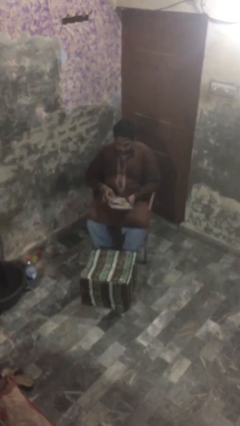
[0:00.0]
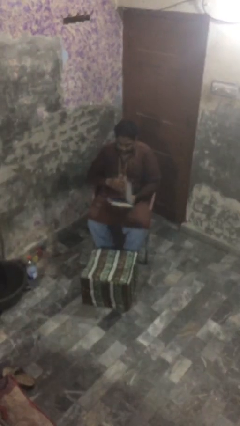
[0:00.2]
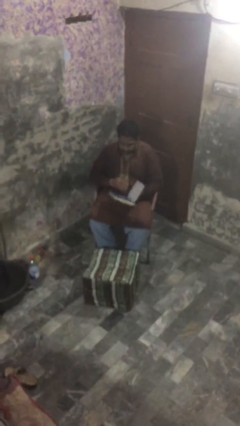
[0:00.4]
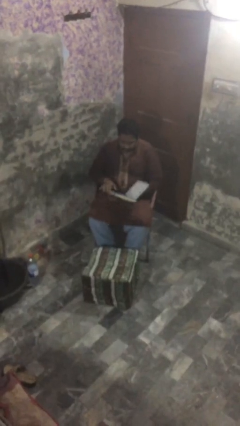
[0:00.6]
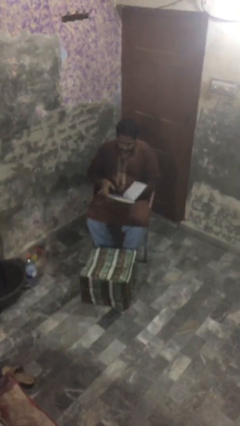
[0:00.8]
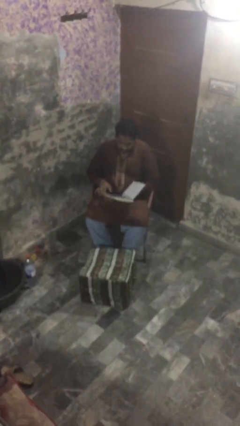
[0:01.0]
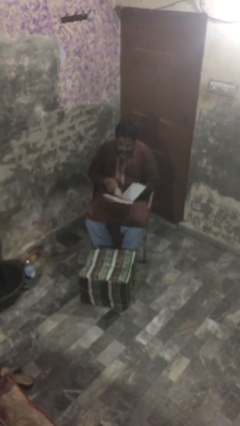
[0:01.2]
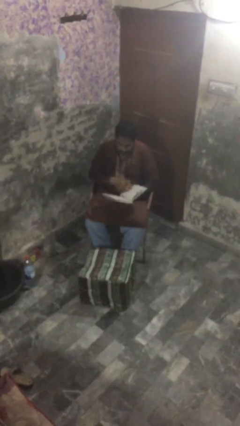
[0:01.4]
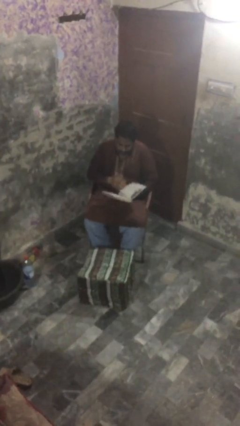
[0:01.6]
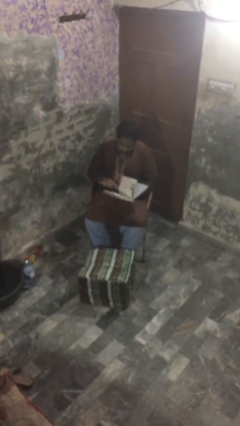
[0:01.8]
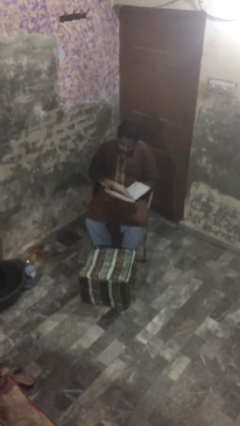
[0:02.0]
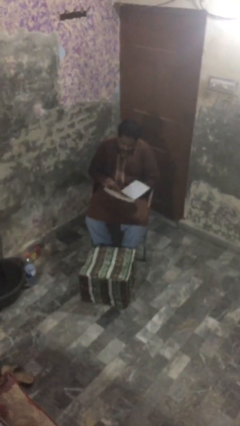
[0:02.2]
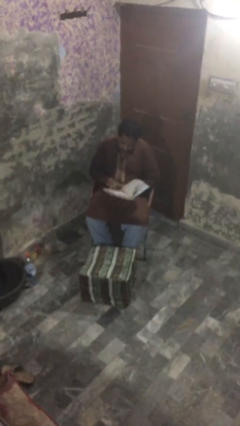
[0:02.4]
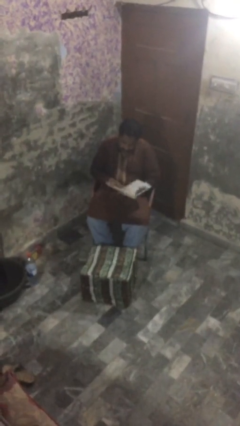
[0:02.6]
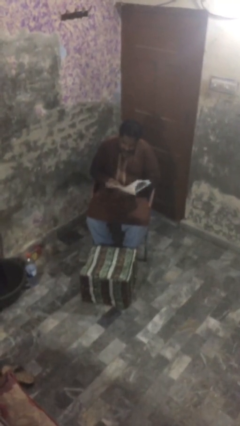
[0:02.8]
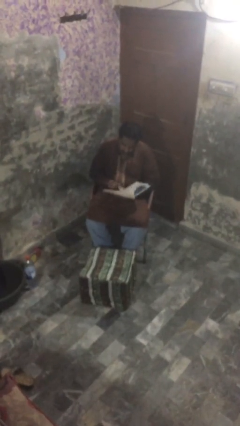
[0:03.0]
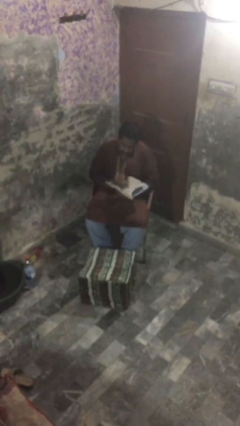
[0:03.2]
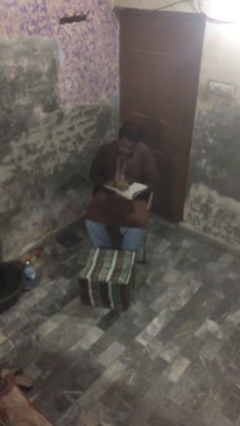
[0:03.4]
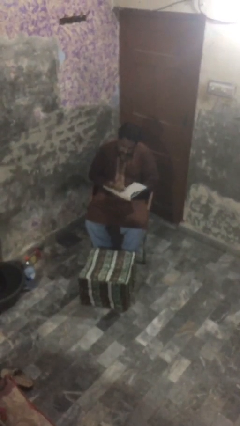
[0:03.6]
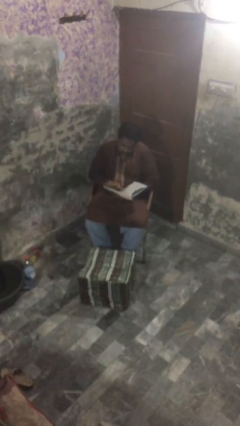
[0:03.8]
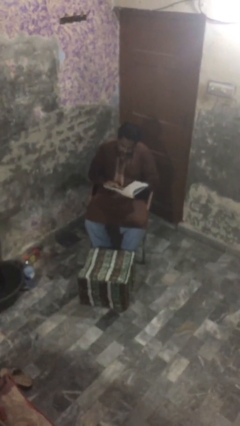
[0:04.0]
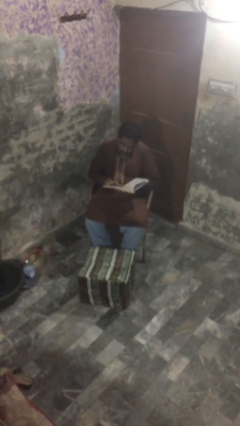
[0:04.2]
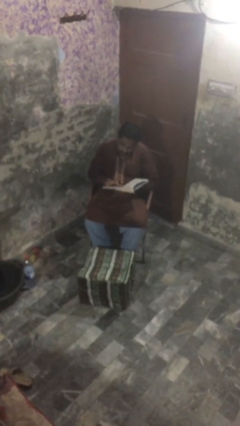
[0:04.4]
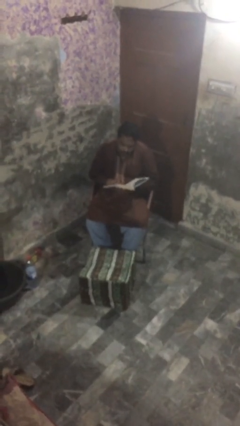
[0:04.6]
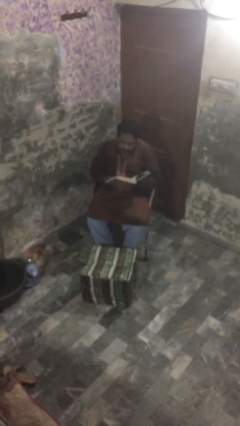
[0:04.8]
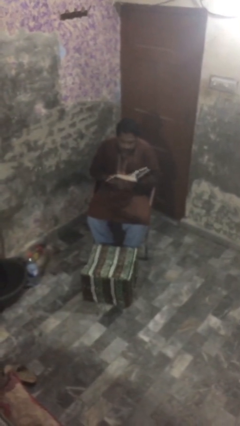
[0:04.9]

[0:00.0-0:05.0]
person reads document

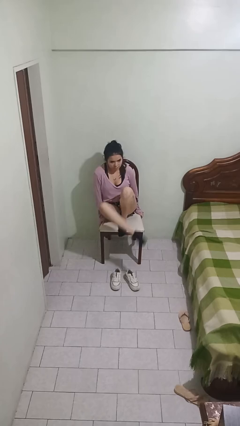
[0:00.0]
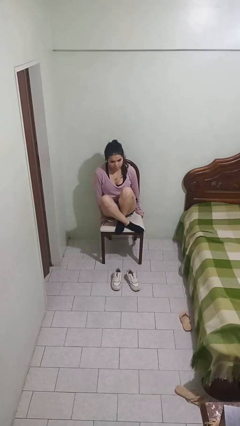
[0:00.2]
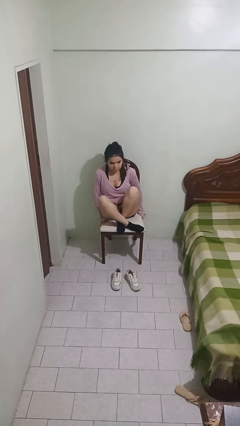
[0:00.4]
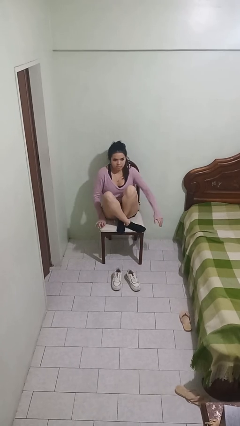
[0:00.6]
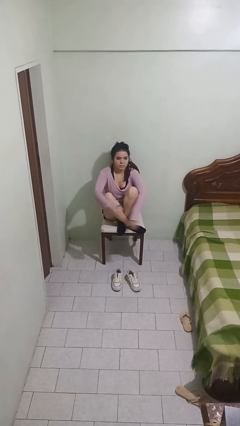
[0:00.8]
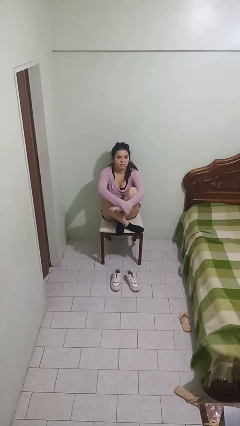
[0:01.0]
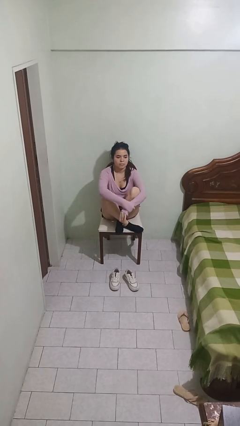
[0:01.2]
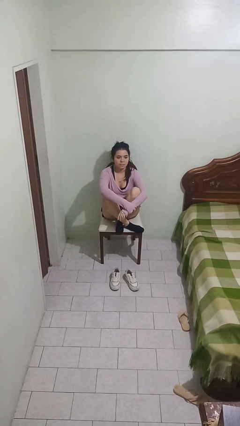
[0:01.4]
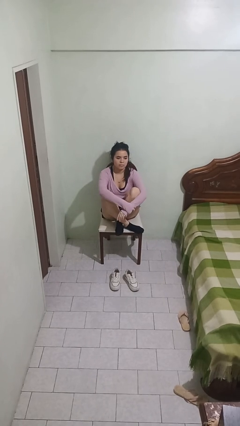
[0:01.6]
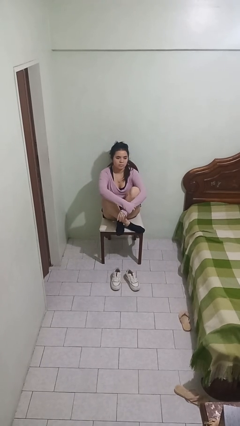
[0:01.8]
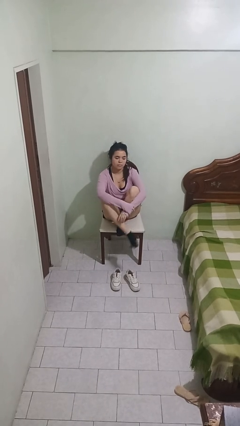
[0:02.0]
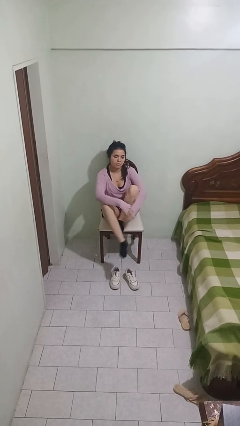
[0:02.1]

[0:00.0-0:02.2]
person puts feet up

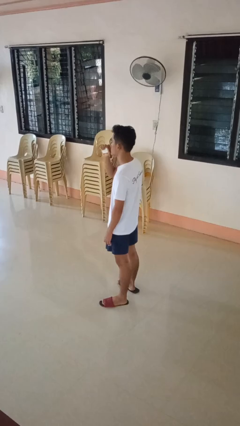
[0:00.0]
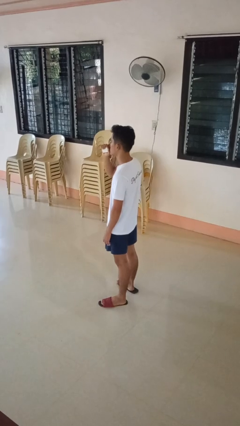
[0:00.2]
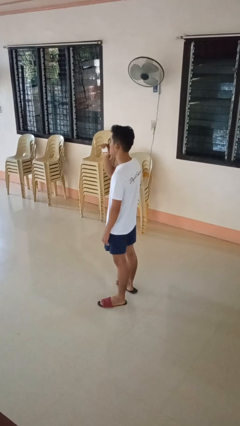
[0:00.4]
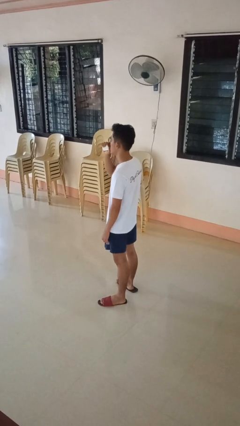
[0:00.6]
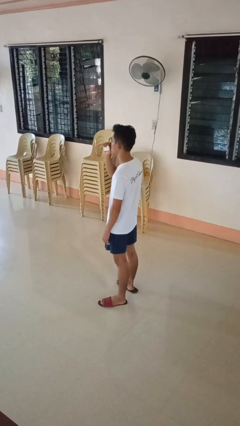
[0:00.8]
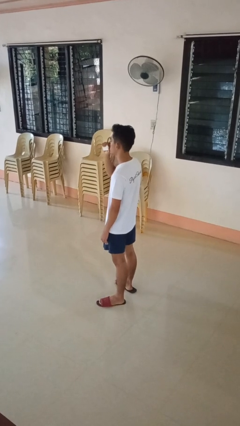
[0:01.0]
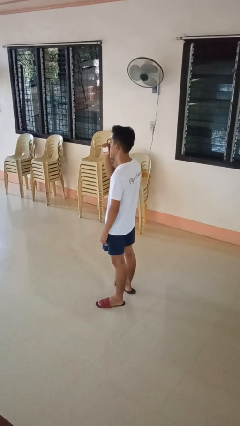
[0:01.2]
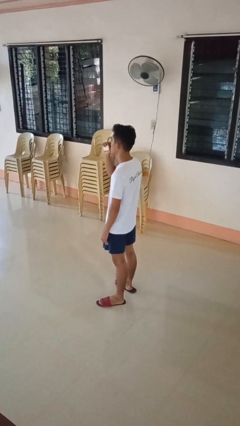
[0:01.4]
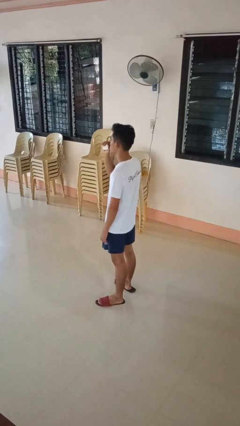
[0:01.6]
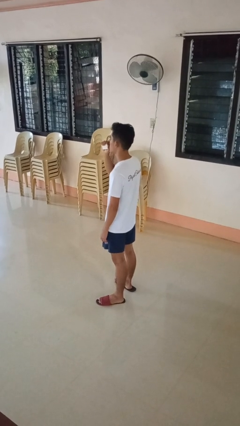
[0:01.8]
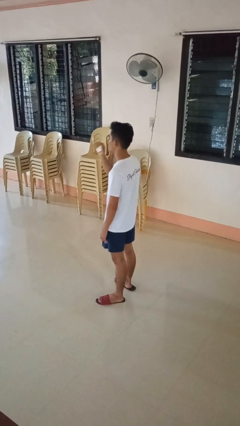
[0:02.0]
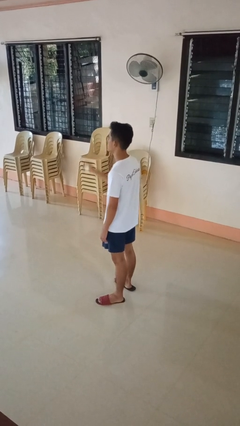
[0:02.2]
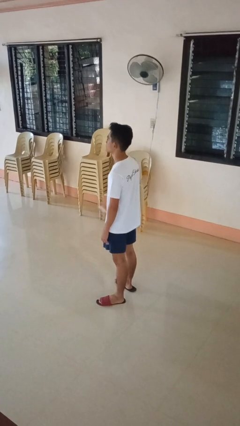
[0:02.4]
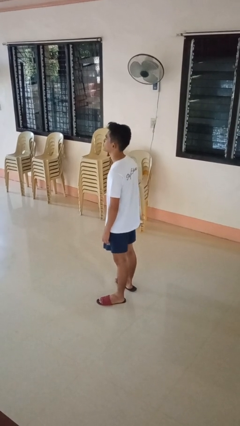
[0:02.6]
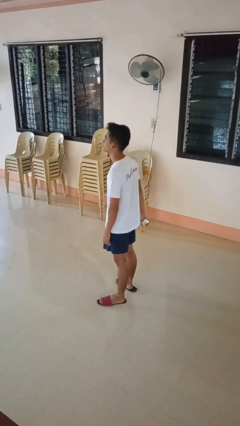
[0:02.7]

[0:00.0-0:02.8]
person vapes

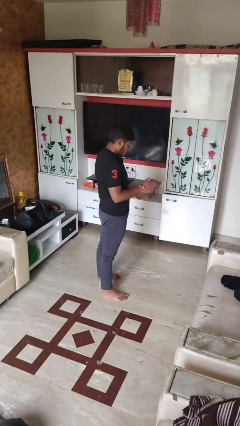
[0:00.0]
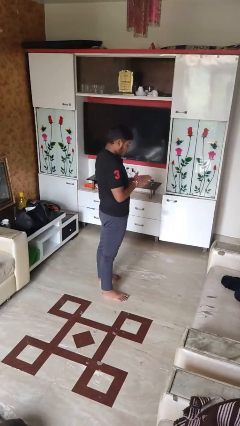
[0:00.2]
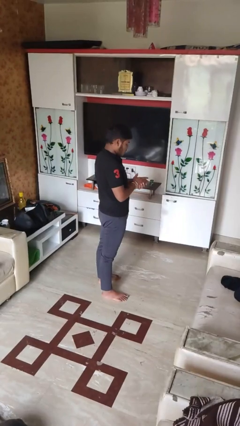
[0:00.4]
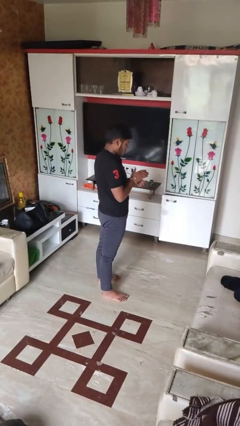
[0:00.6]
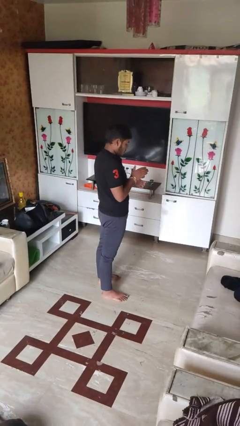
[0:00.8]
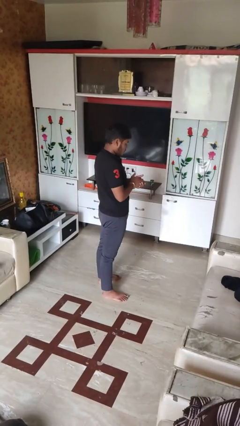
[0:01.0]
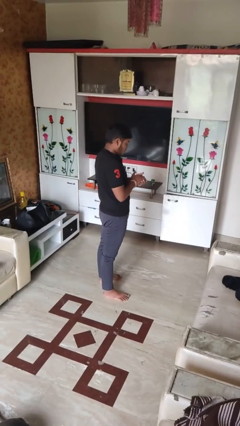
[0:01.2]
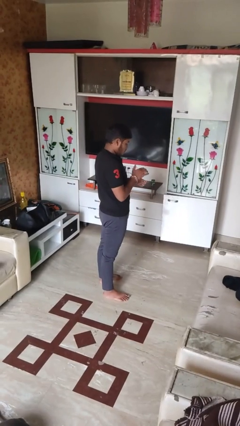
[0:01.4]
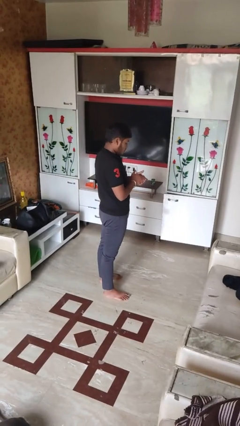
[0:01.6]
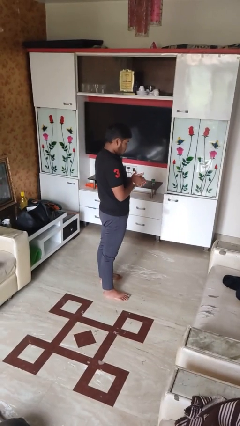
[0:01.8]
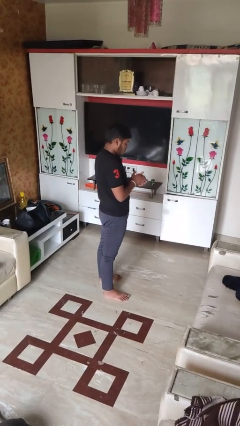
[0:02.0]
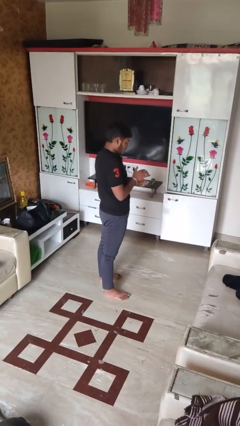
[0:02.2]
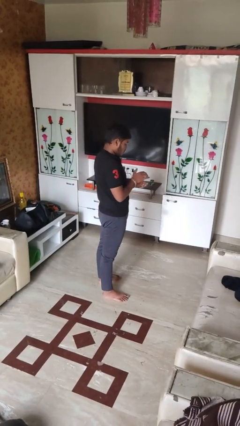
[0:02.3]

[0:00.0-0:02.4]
person claps hands

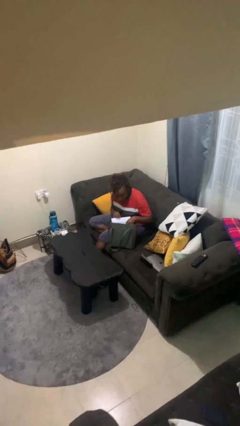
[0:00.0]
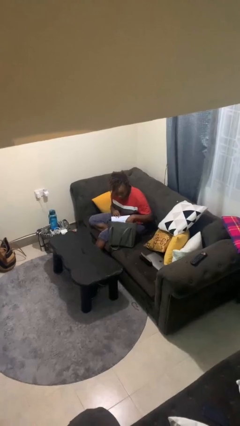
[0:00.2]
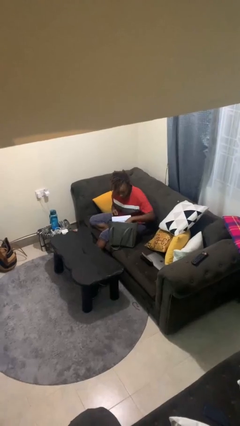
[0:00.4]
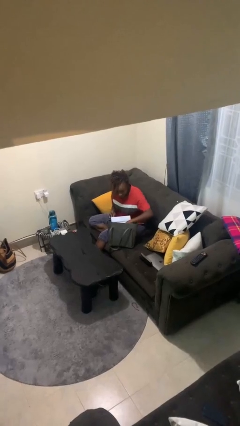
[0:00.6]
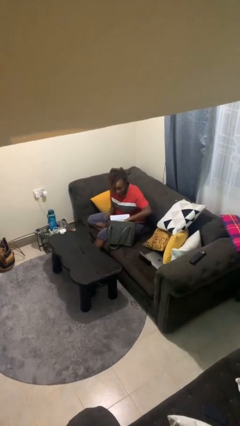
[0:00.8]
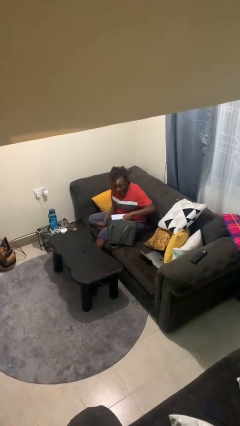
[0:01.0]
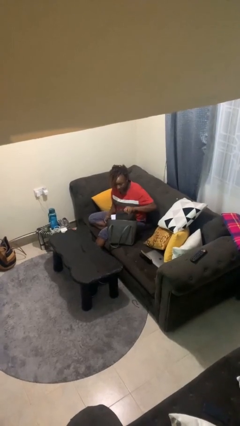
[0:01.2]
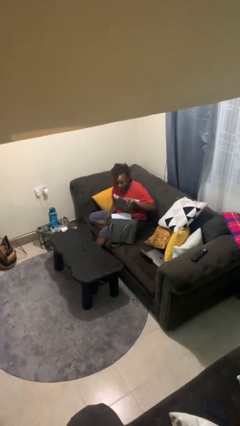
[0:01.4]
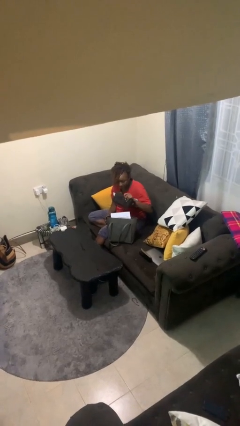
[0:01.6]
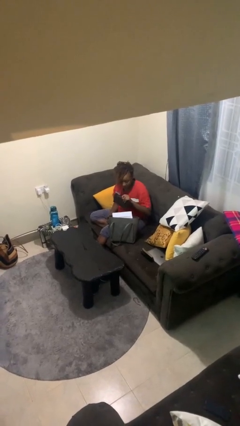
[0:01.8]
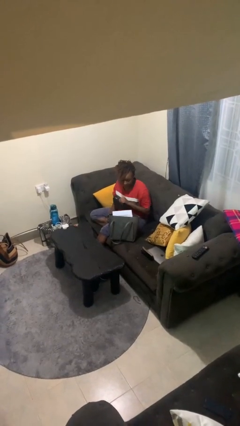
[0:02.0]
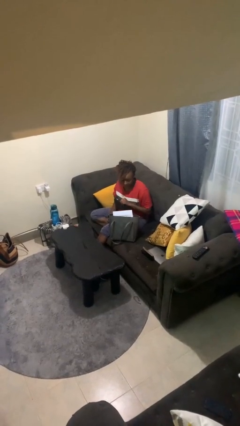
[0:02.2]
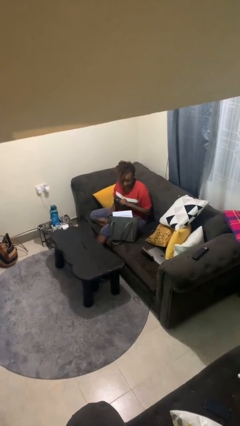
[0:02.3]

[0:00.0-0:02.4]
person takes object from purse

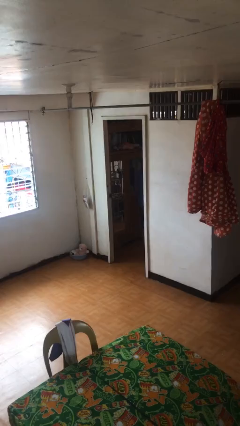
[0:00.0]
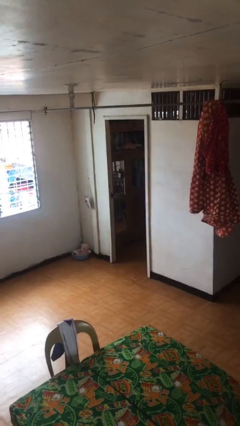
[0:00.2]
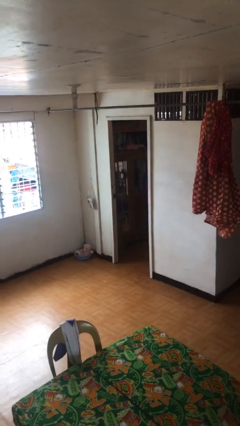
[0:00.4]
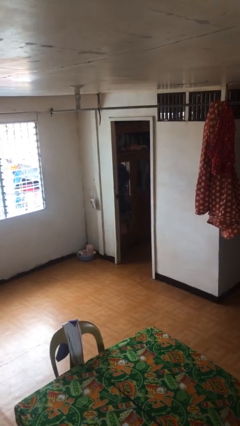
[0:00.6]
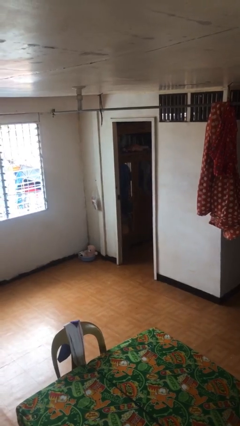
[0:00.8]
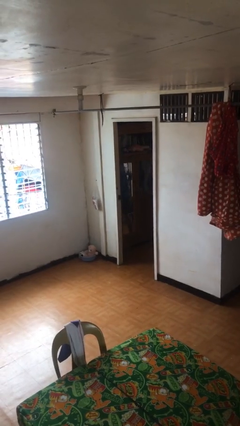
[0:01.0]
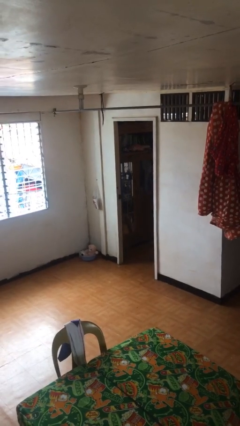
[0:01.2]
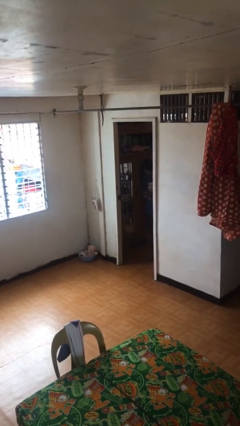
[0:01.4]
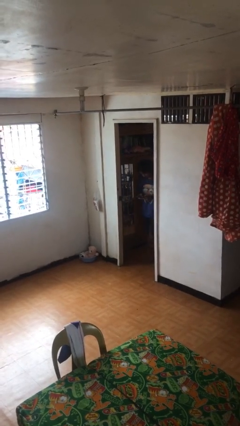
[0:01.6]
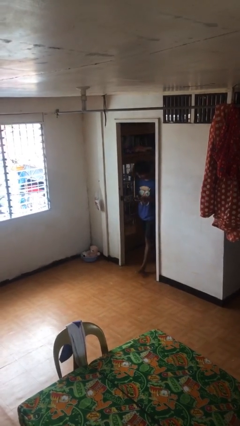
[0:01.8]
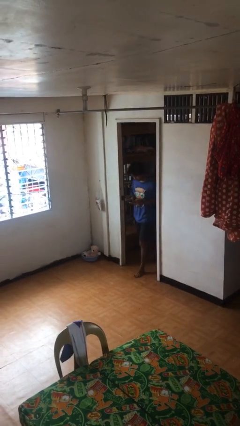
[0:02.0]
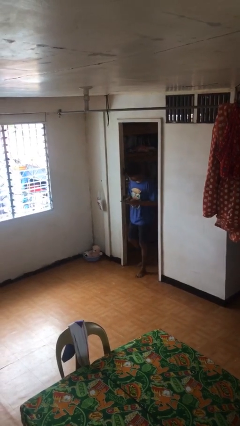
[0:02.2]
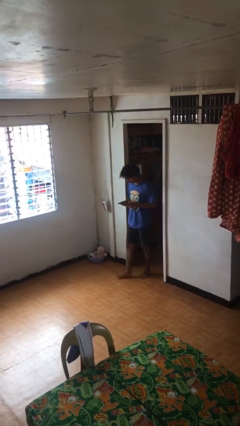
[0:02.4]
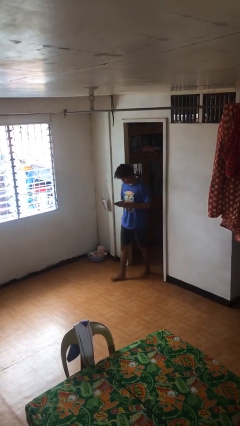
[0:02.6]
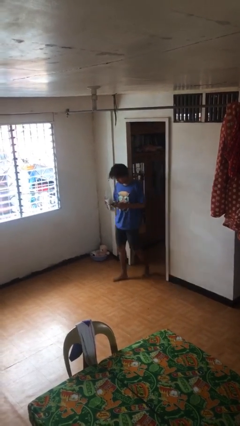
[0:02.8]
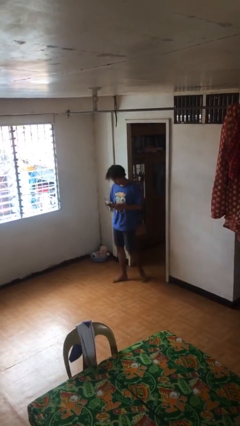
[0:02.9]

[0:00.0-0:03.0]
person exits scene through structure
